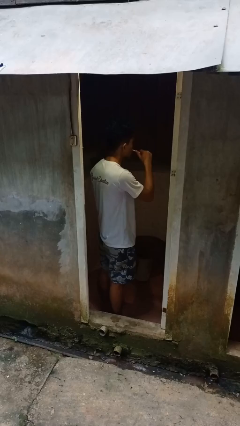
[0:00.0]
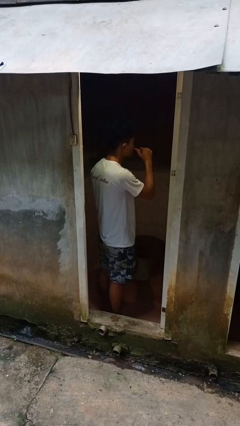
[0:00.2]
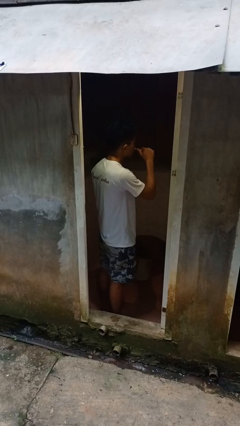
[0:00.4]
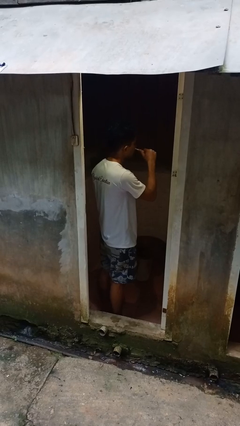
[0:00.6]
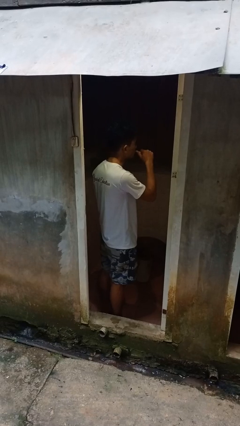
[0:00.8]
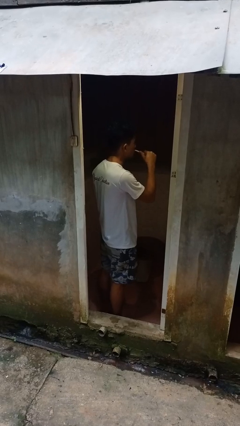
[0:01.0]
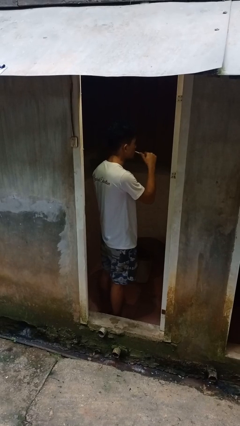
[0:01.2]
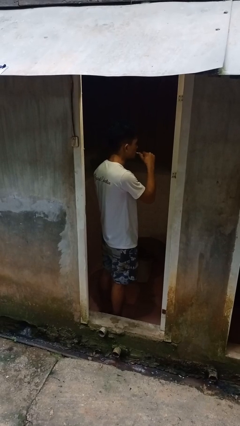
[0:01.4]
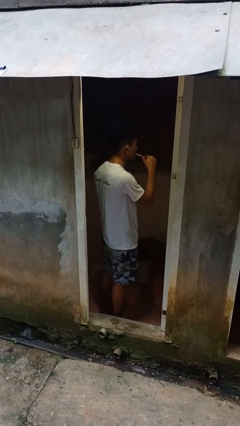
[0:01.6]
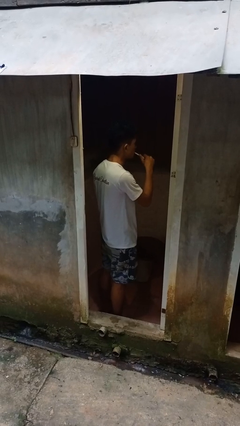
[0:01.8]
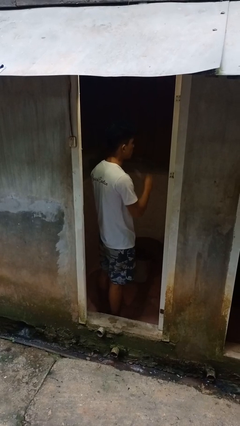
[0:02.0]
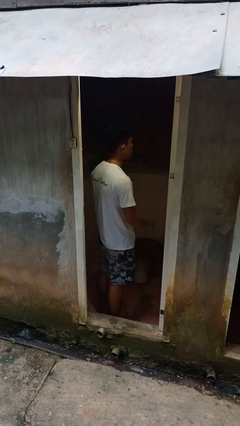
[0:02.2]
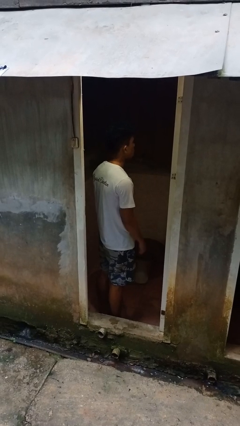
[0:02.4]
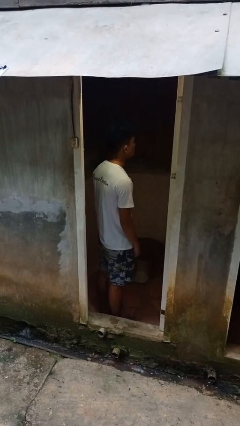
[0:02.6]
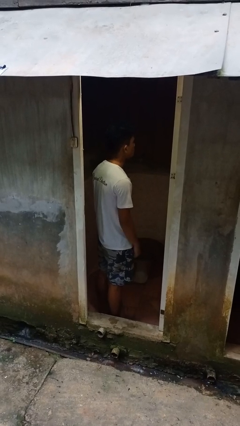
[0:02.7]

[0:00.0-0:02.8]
person brushes teeth

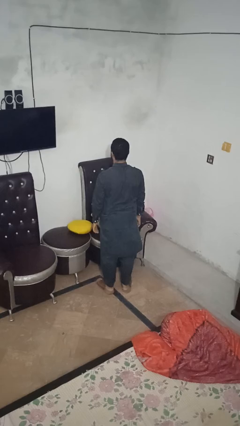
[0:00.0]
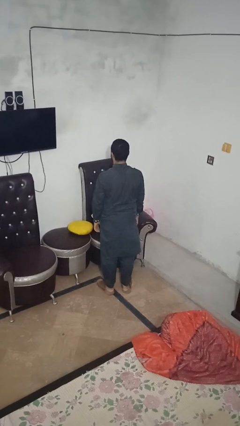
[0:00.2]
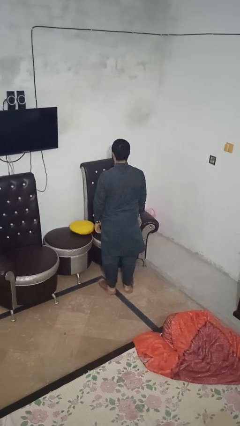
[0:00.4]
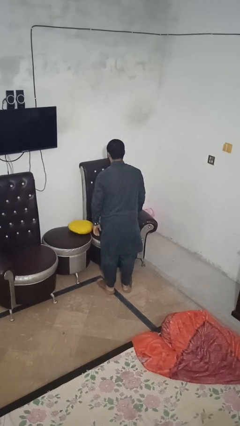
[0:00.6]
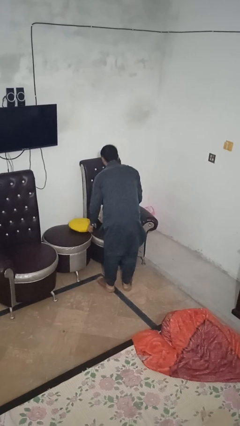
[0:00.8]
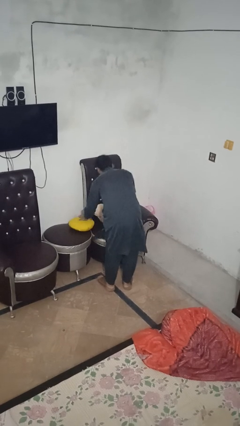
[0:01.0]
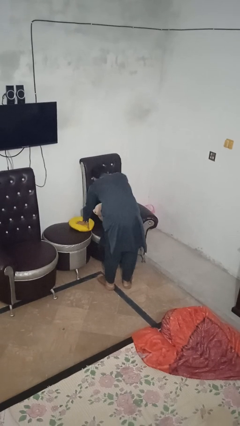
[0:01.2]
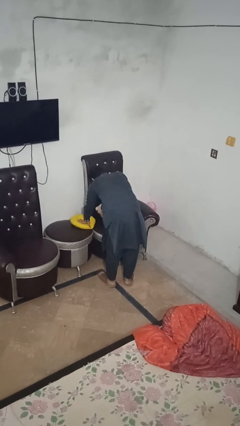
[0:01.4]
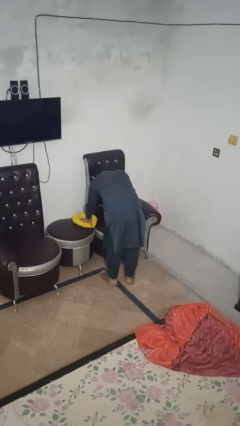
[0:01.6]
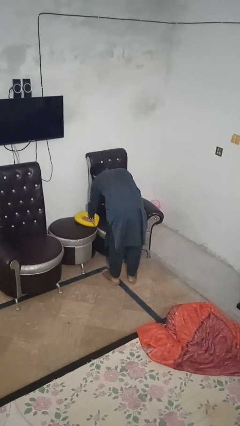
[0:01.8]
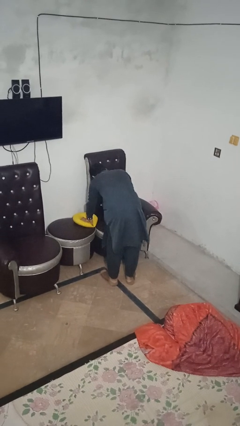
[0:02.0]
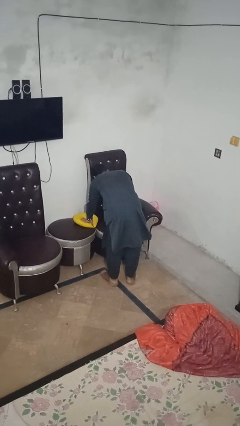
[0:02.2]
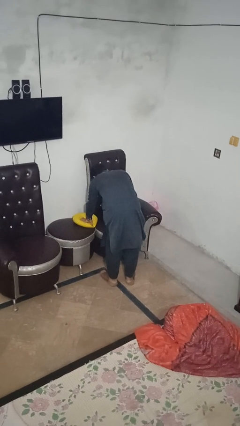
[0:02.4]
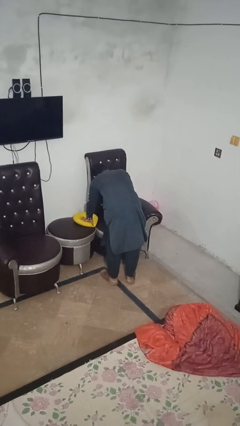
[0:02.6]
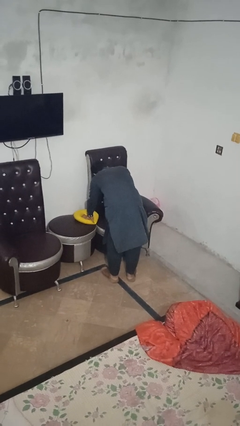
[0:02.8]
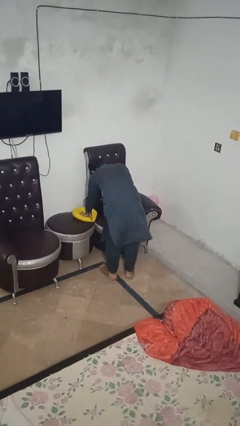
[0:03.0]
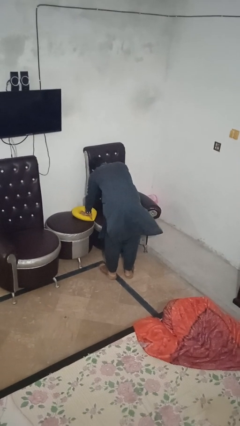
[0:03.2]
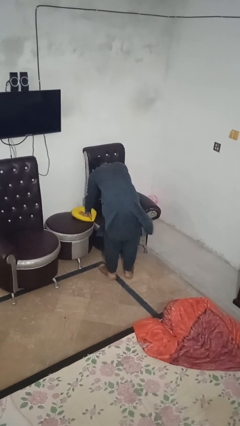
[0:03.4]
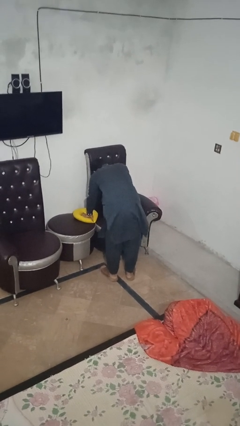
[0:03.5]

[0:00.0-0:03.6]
person searches in couch

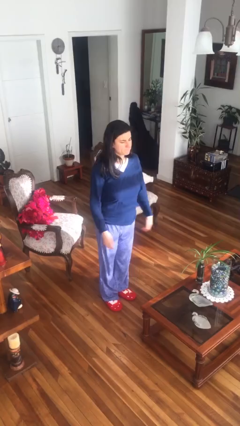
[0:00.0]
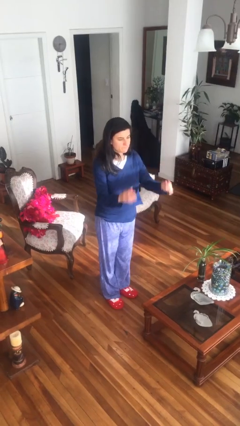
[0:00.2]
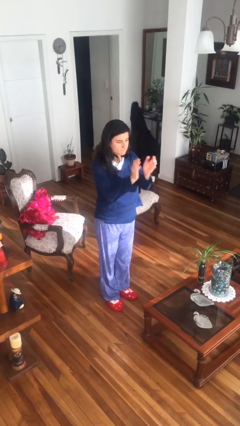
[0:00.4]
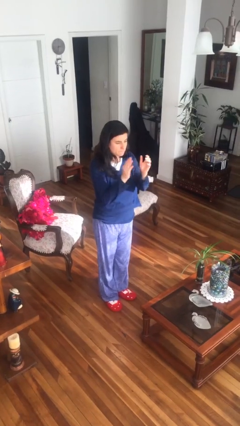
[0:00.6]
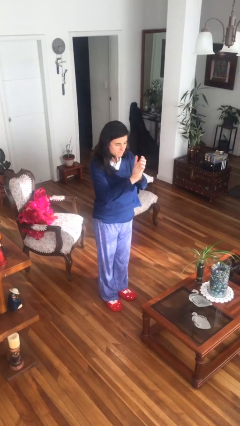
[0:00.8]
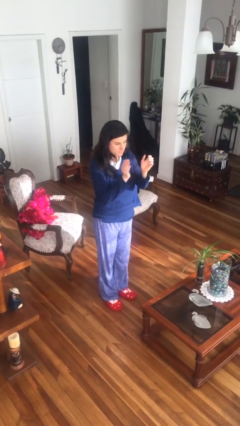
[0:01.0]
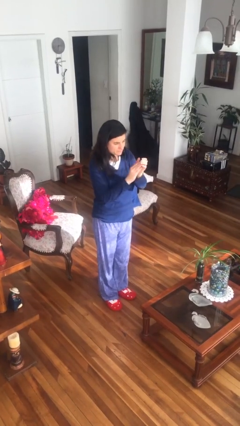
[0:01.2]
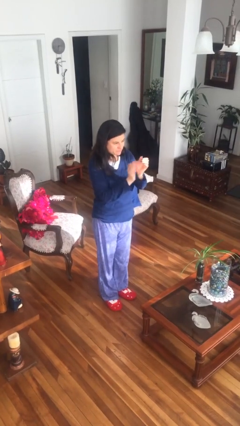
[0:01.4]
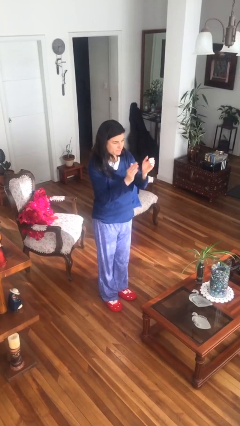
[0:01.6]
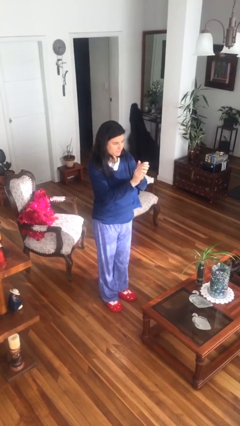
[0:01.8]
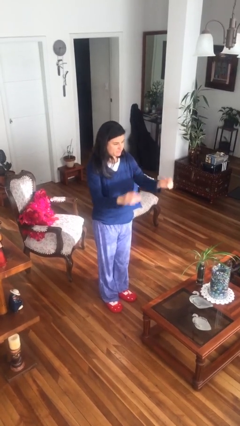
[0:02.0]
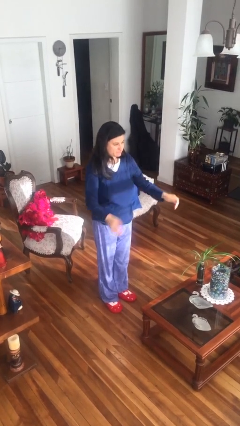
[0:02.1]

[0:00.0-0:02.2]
person claps hands

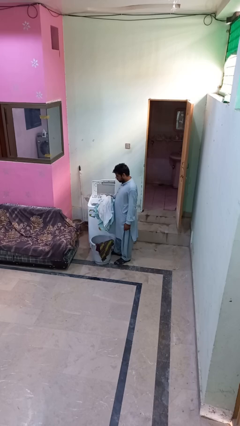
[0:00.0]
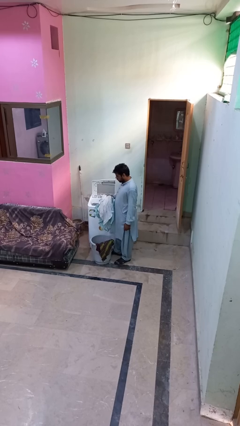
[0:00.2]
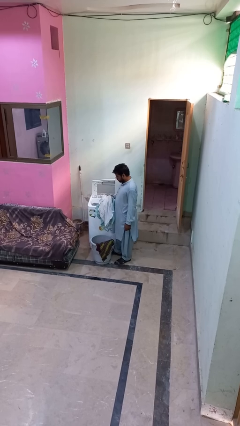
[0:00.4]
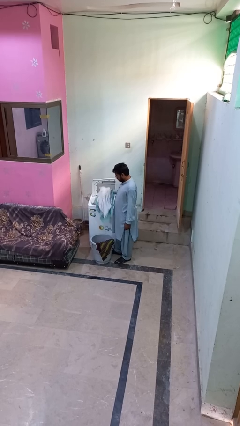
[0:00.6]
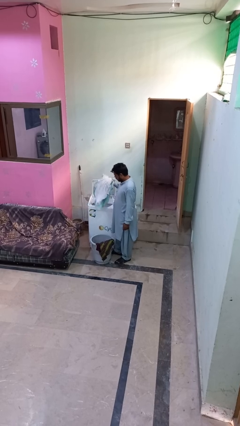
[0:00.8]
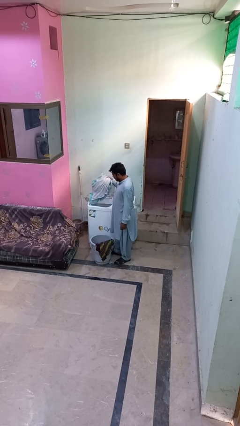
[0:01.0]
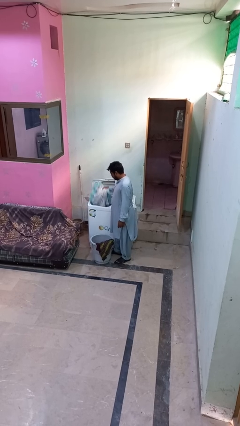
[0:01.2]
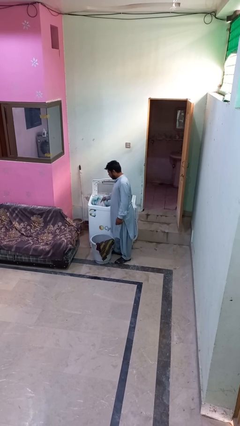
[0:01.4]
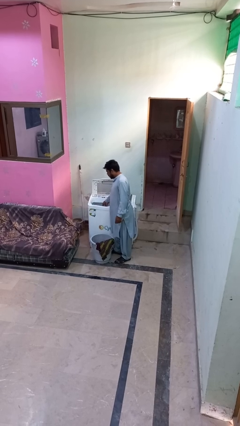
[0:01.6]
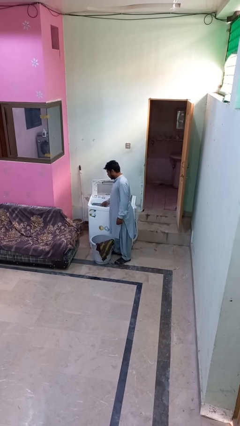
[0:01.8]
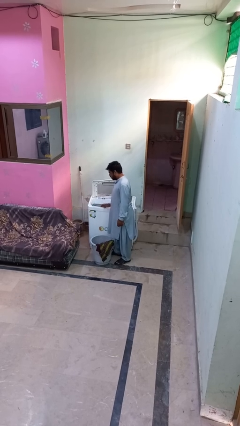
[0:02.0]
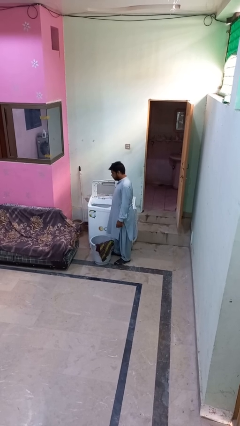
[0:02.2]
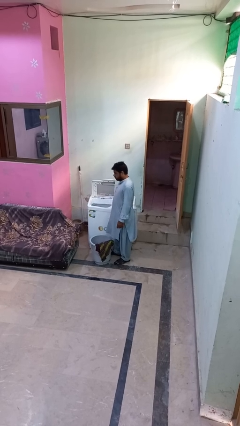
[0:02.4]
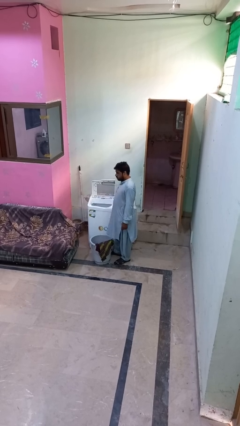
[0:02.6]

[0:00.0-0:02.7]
person loads clotheswasher

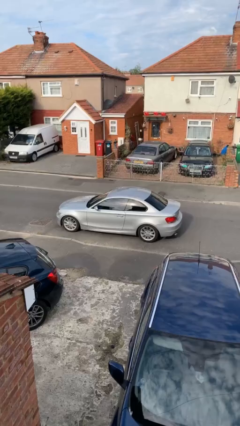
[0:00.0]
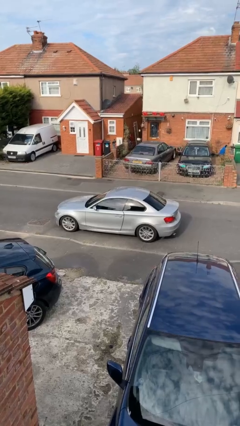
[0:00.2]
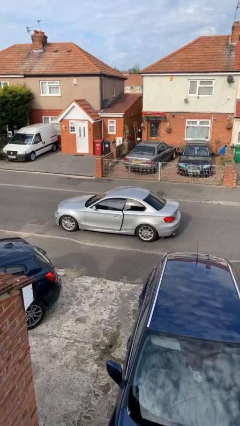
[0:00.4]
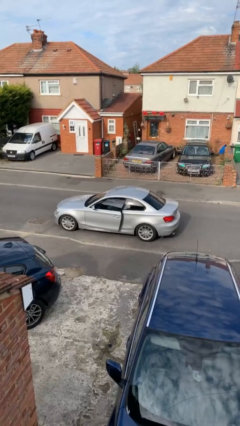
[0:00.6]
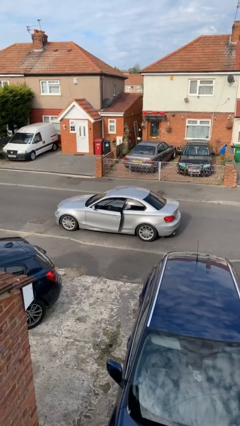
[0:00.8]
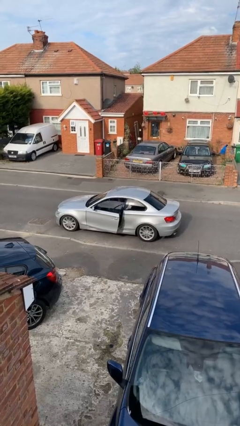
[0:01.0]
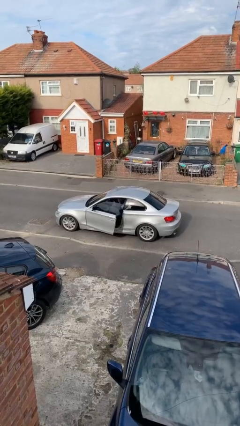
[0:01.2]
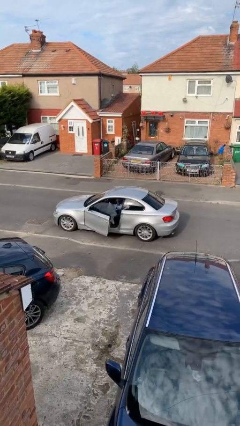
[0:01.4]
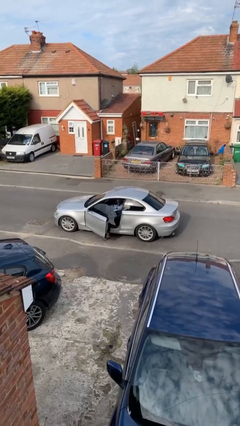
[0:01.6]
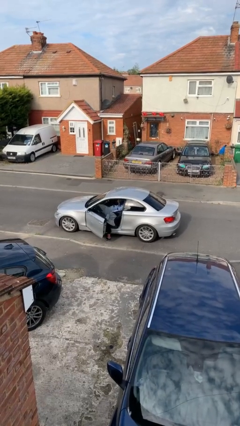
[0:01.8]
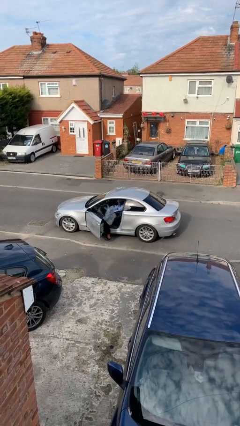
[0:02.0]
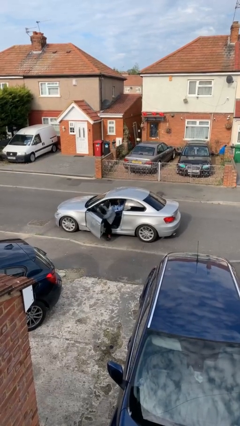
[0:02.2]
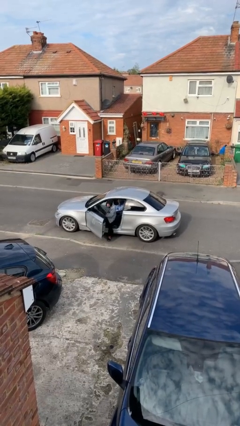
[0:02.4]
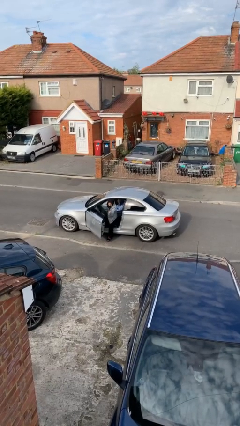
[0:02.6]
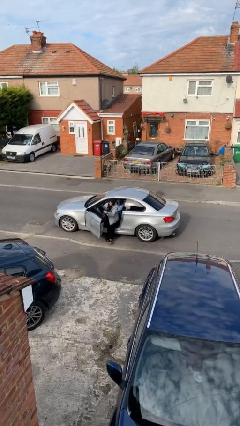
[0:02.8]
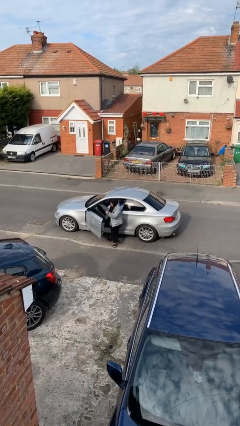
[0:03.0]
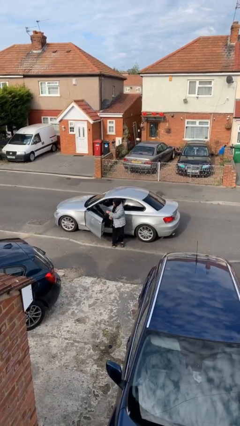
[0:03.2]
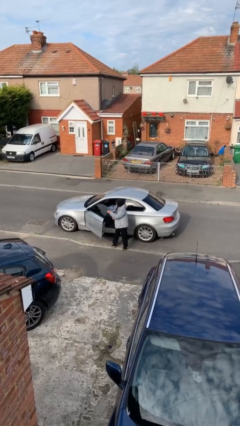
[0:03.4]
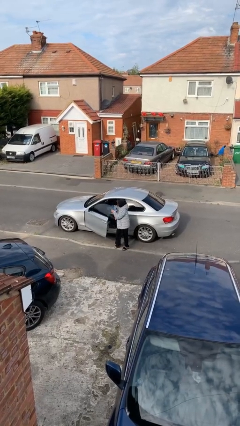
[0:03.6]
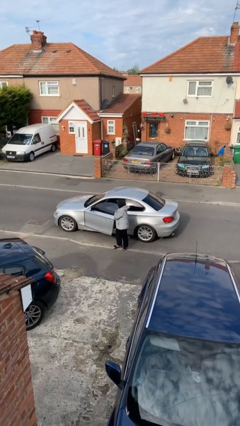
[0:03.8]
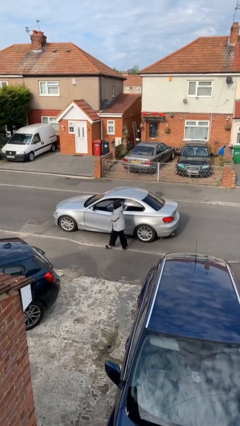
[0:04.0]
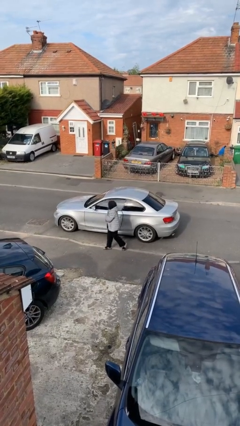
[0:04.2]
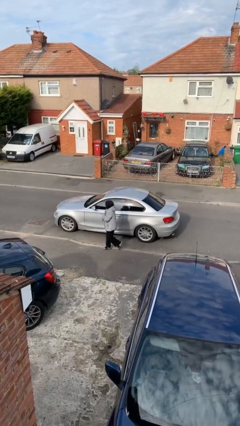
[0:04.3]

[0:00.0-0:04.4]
car drops off person

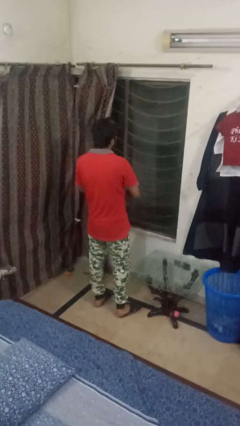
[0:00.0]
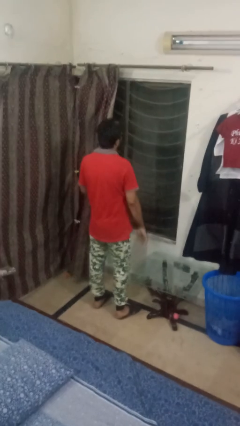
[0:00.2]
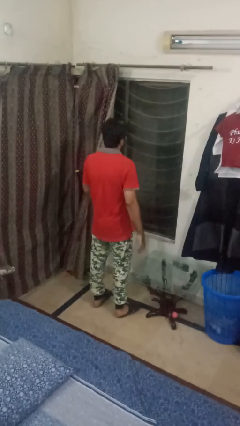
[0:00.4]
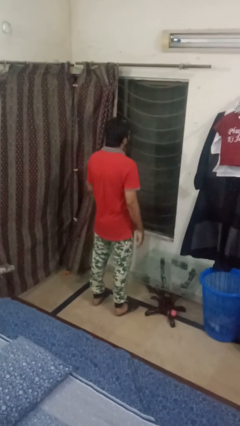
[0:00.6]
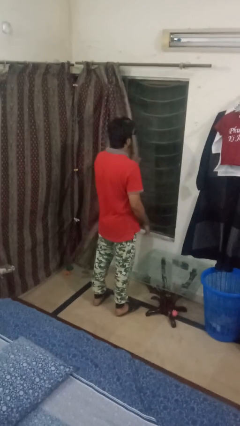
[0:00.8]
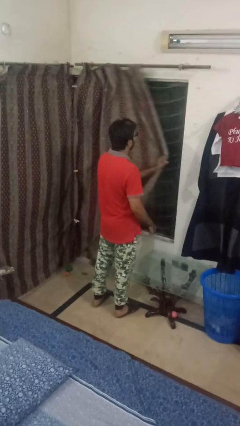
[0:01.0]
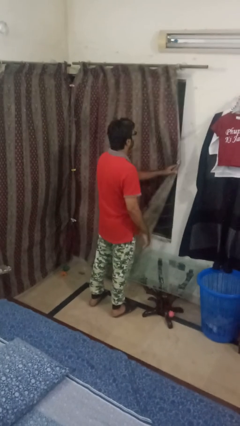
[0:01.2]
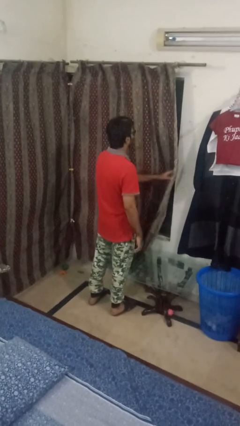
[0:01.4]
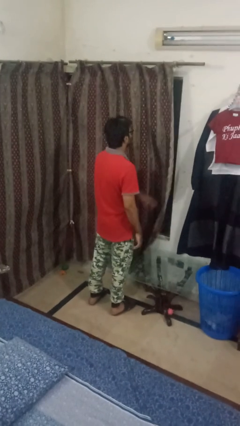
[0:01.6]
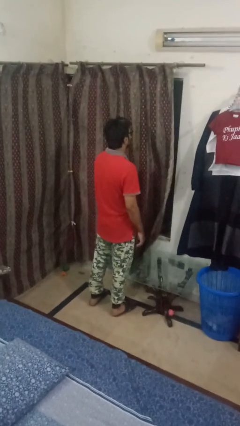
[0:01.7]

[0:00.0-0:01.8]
person closes curtains

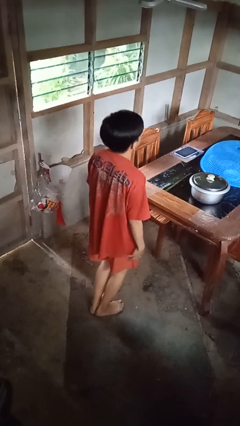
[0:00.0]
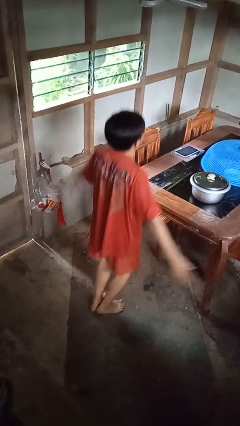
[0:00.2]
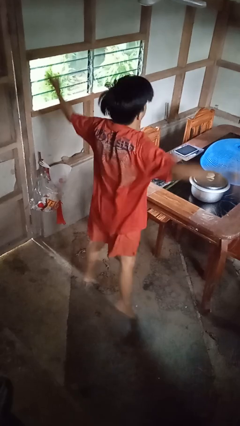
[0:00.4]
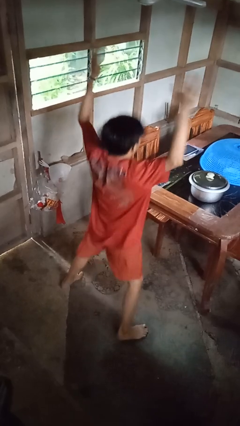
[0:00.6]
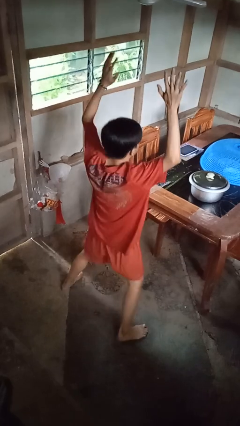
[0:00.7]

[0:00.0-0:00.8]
person exercises with jumping jacks
